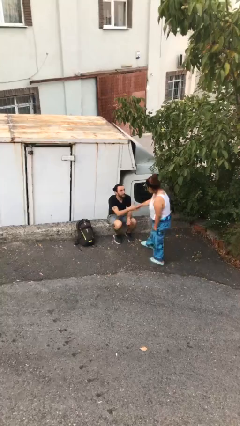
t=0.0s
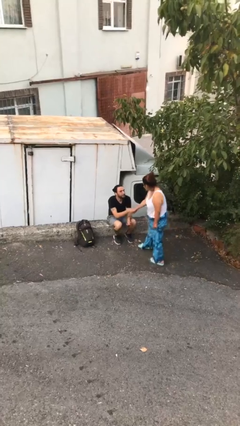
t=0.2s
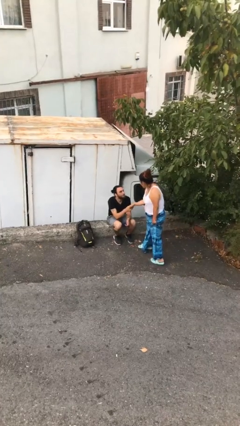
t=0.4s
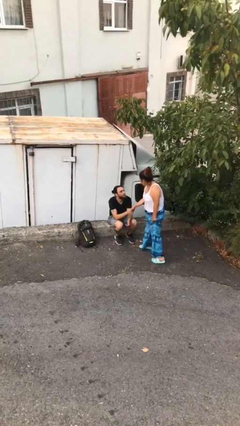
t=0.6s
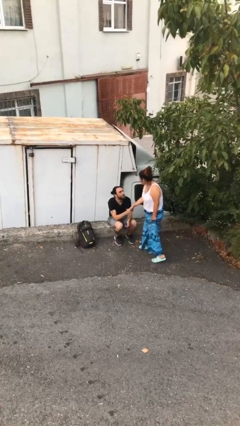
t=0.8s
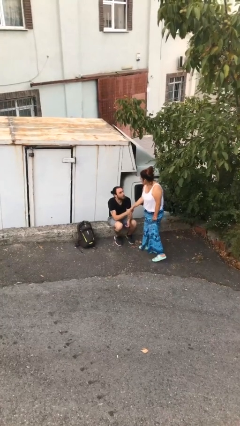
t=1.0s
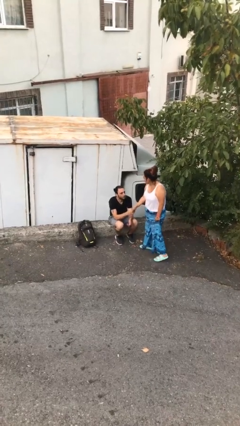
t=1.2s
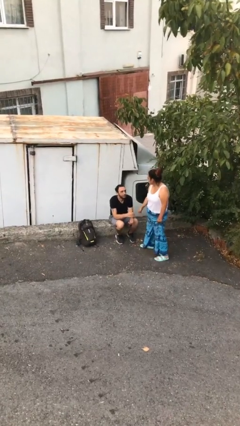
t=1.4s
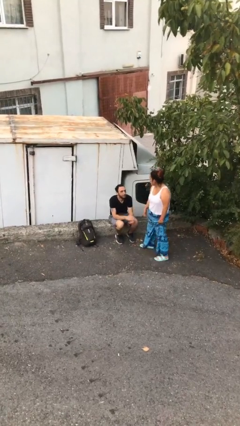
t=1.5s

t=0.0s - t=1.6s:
person shakes hand

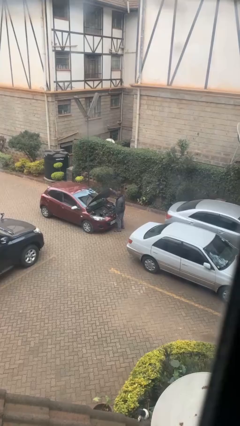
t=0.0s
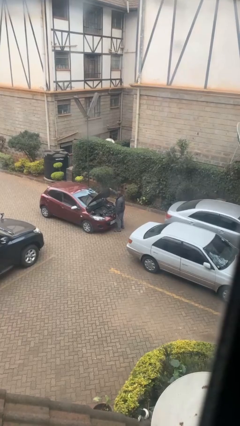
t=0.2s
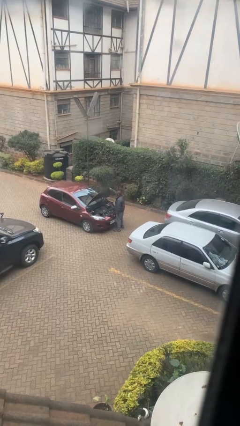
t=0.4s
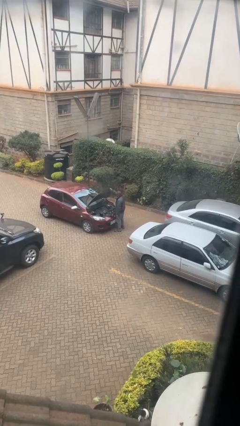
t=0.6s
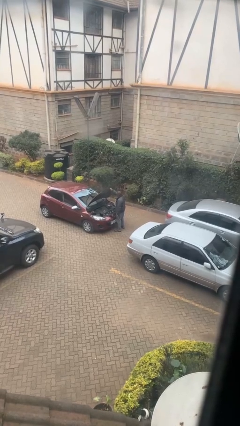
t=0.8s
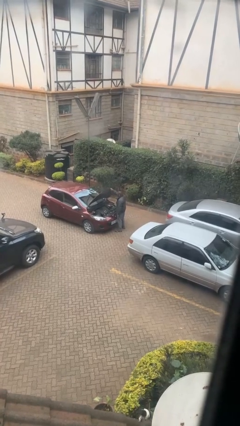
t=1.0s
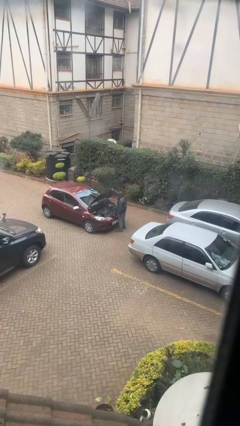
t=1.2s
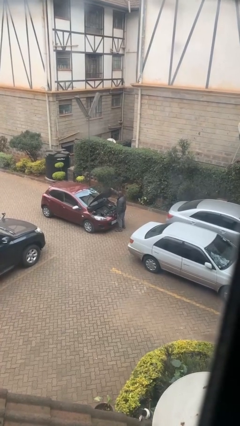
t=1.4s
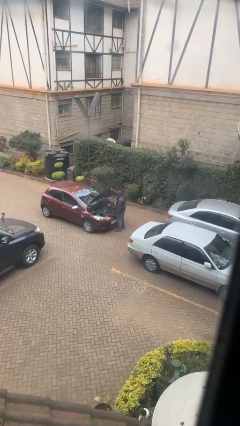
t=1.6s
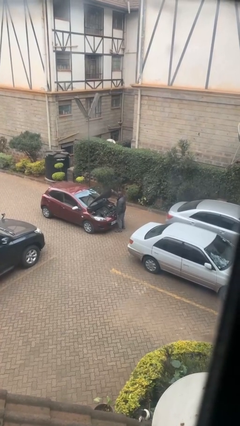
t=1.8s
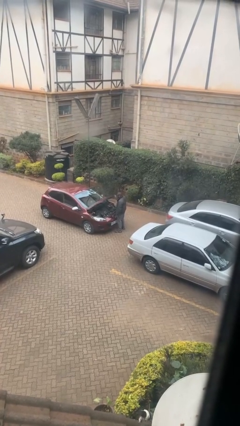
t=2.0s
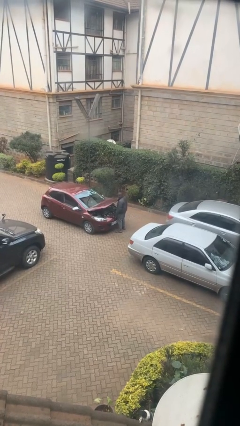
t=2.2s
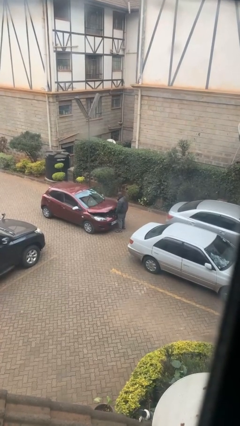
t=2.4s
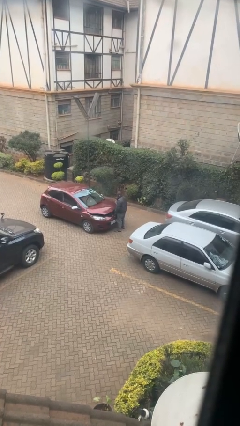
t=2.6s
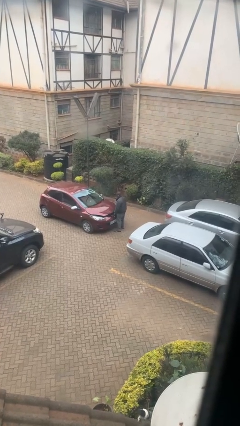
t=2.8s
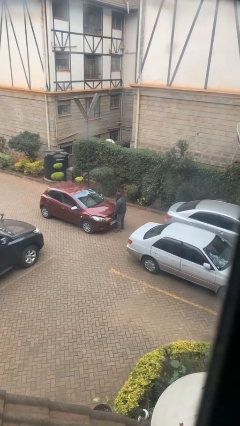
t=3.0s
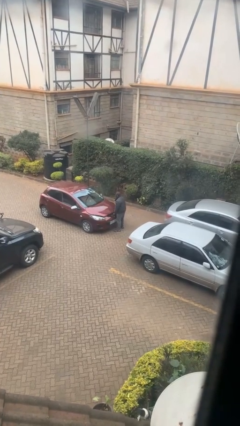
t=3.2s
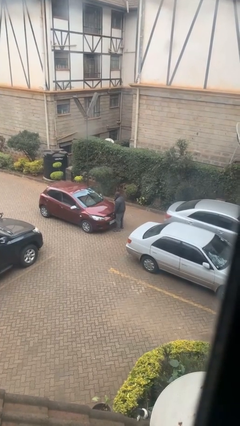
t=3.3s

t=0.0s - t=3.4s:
person closes car hood

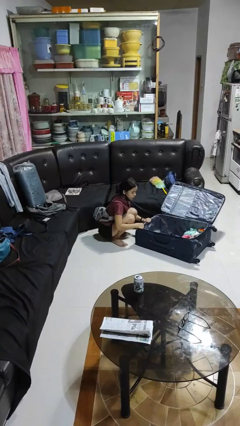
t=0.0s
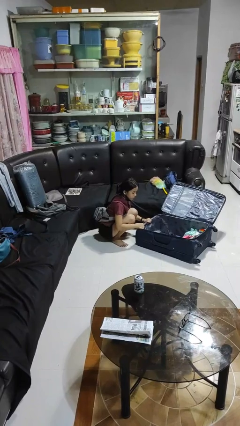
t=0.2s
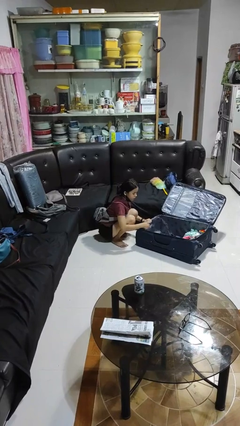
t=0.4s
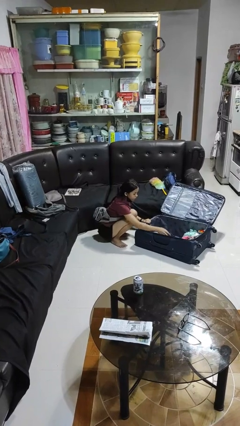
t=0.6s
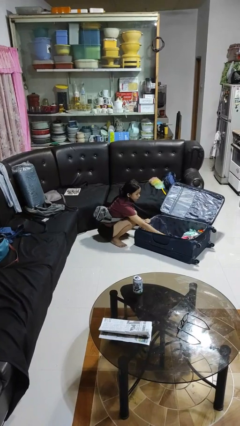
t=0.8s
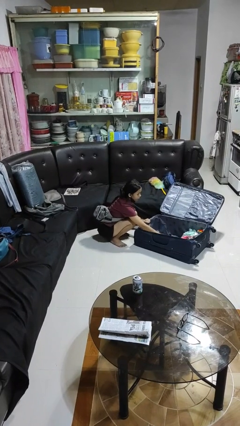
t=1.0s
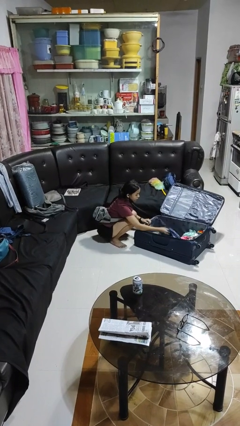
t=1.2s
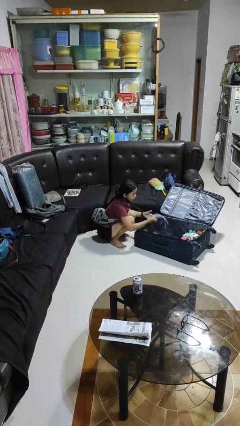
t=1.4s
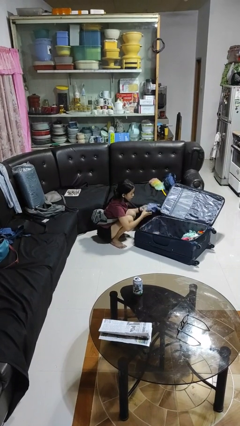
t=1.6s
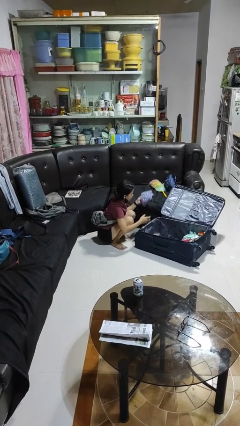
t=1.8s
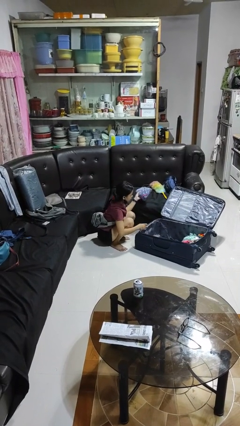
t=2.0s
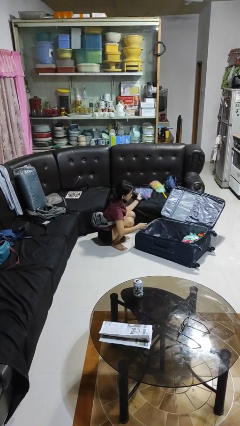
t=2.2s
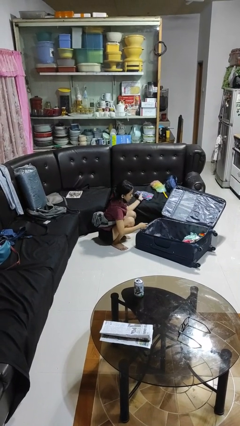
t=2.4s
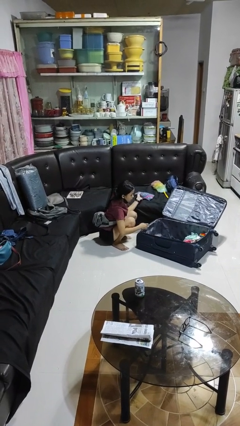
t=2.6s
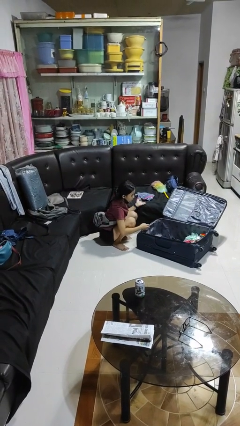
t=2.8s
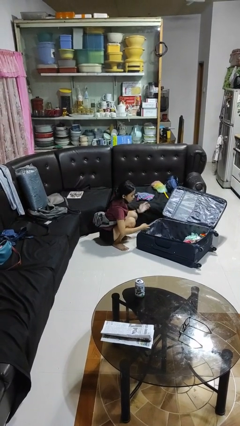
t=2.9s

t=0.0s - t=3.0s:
person unloads clothes from suitcase

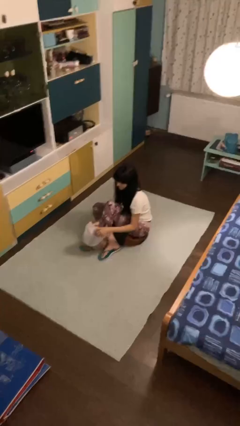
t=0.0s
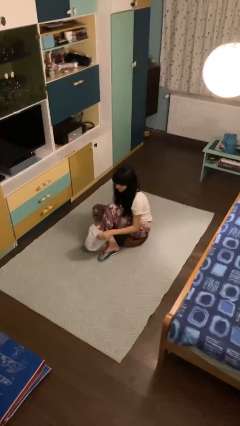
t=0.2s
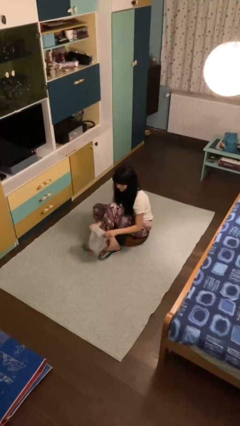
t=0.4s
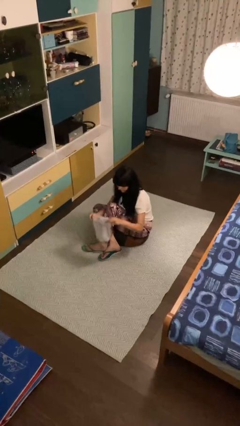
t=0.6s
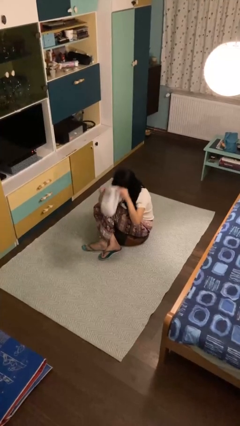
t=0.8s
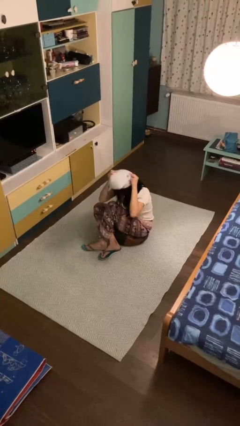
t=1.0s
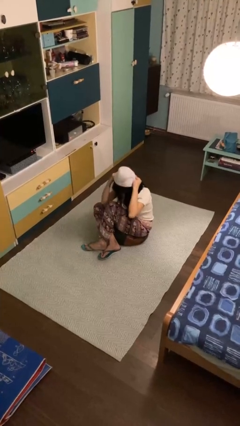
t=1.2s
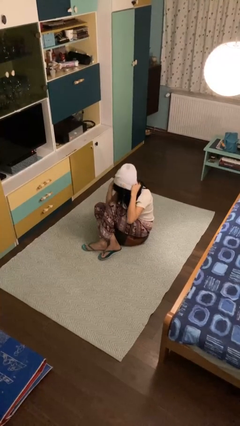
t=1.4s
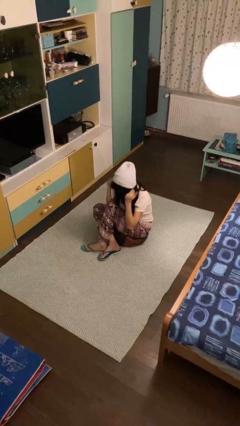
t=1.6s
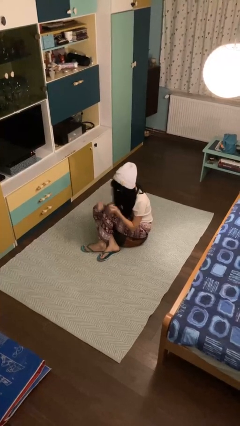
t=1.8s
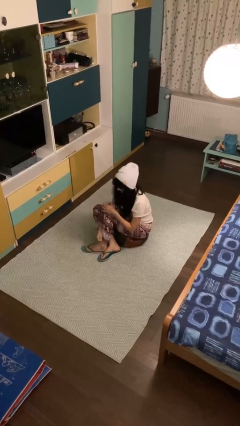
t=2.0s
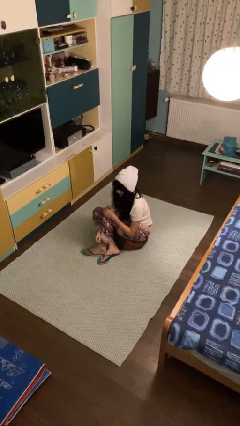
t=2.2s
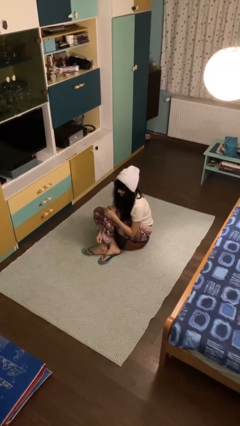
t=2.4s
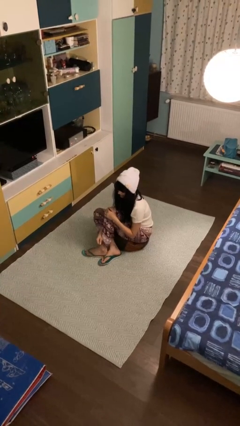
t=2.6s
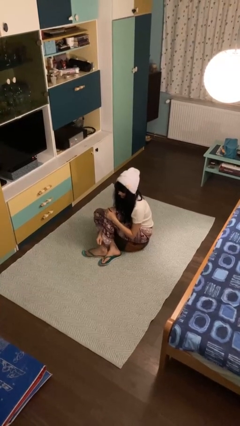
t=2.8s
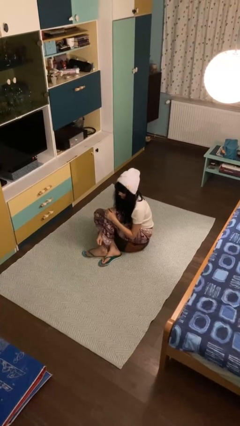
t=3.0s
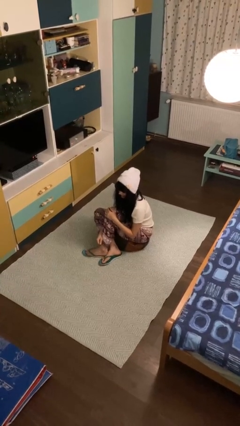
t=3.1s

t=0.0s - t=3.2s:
person puts on hat

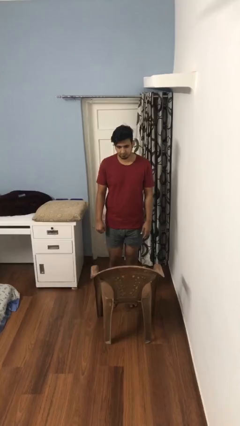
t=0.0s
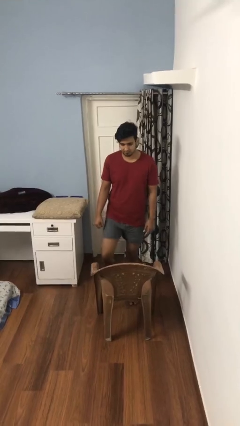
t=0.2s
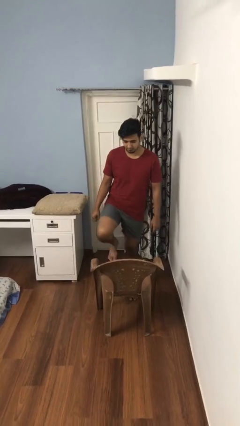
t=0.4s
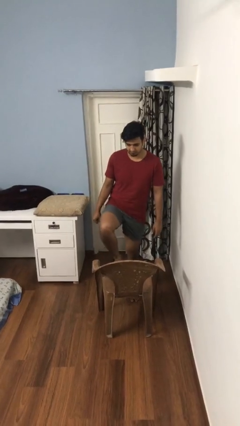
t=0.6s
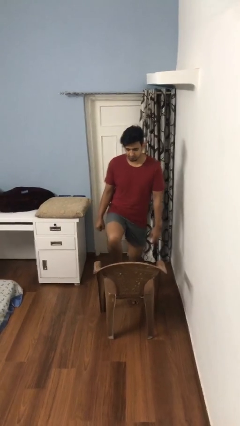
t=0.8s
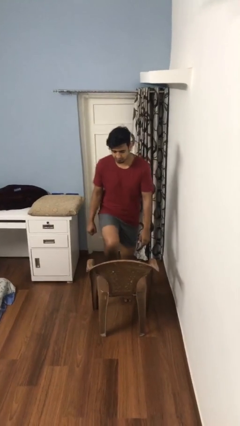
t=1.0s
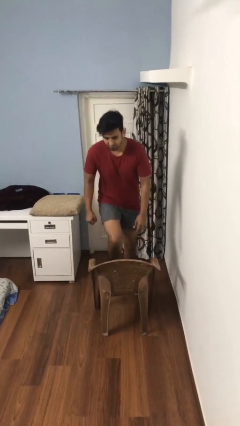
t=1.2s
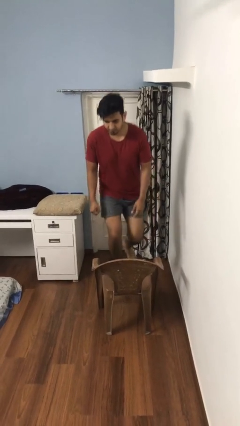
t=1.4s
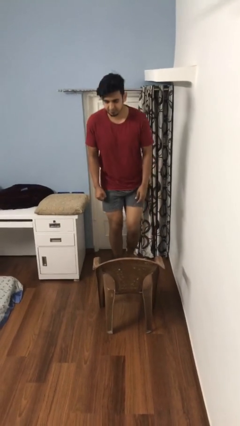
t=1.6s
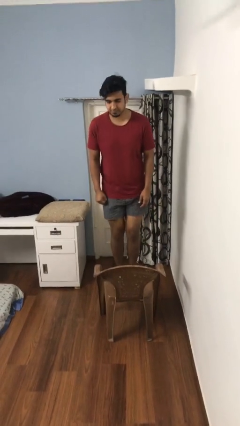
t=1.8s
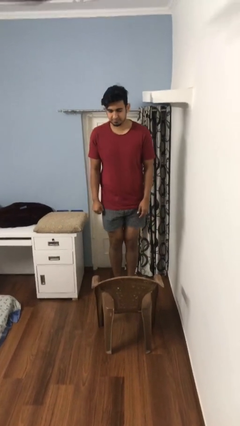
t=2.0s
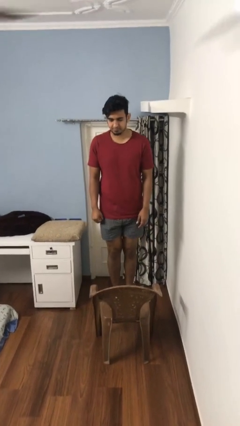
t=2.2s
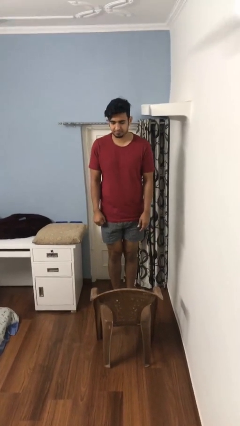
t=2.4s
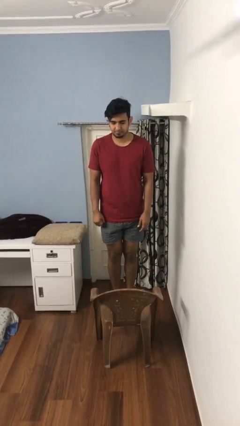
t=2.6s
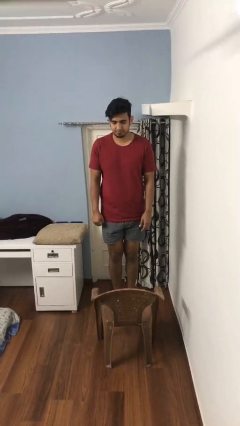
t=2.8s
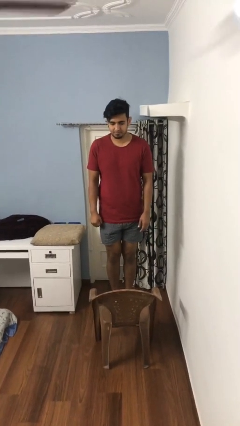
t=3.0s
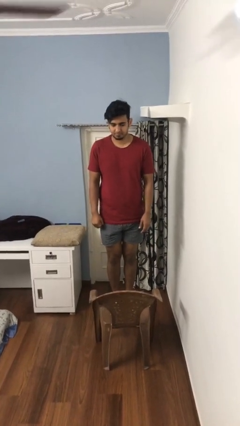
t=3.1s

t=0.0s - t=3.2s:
person climbs on chair

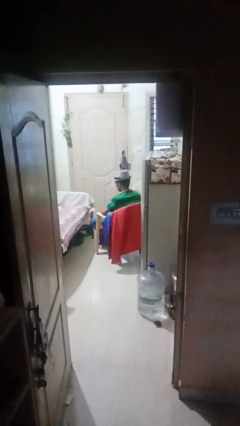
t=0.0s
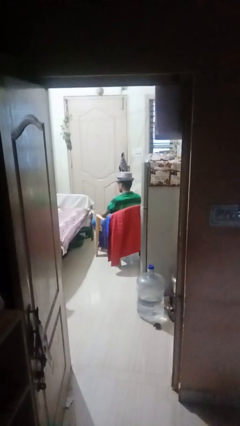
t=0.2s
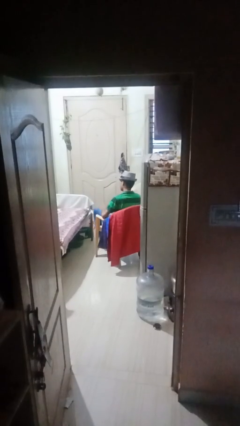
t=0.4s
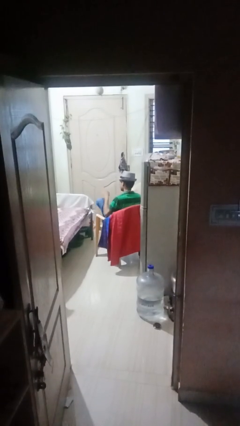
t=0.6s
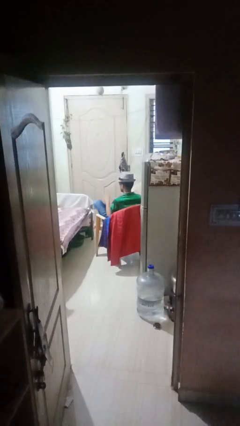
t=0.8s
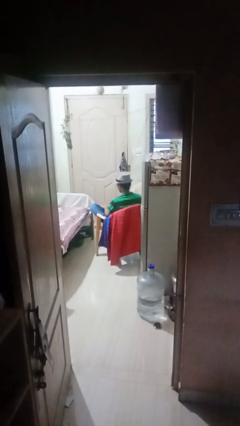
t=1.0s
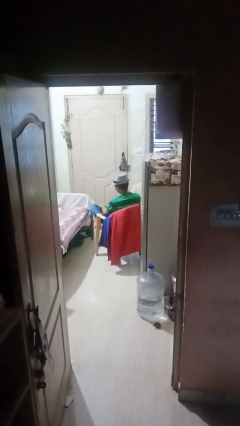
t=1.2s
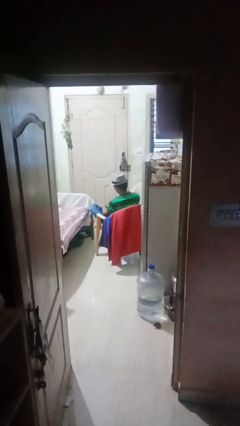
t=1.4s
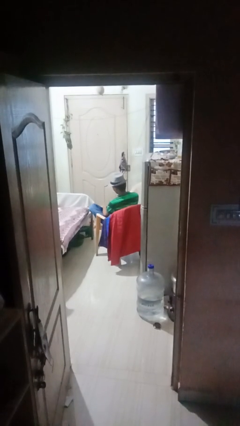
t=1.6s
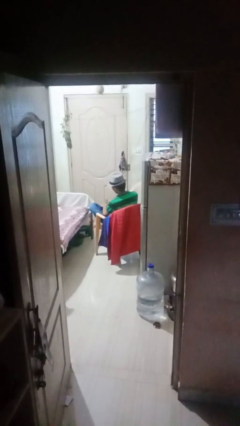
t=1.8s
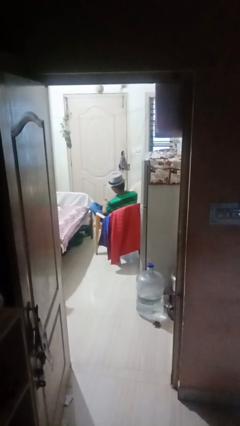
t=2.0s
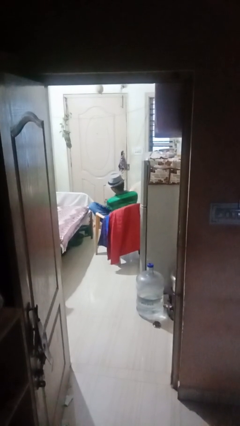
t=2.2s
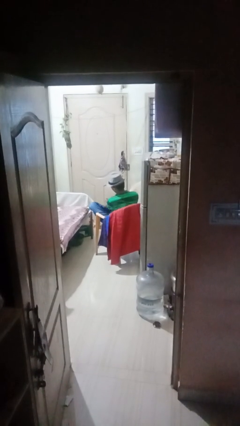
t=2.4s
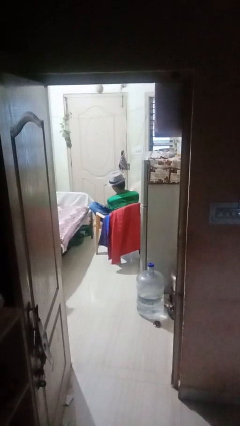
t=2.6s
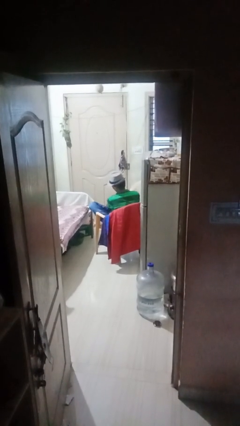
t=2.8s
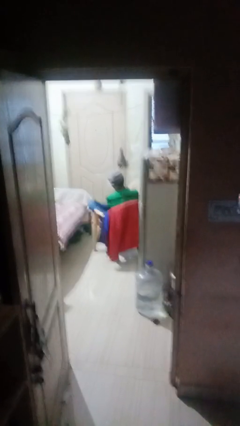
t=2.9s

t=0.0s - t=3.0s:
person rubs foot

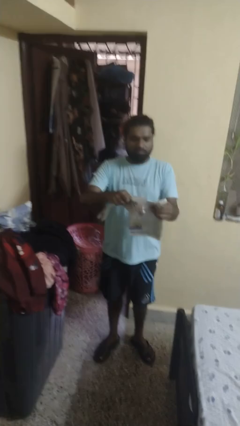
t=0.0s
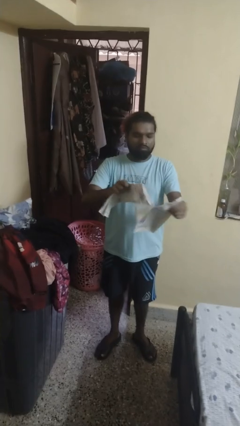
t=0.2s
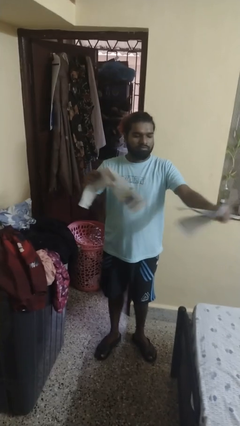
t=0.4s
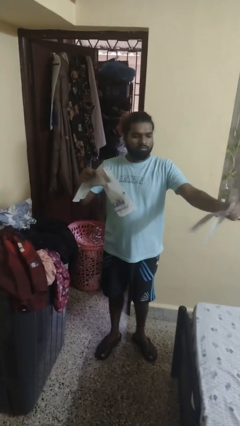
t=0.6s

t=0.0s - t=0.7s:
person tears paper
